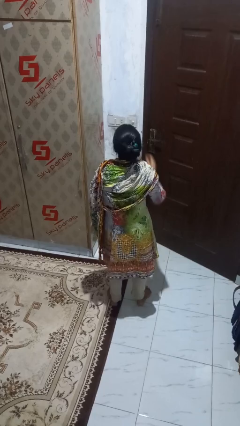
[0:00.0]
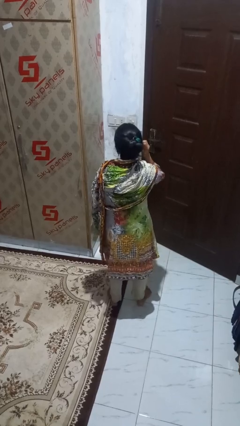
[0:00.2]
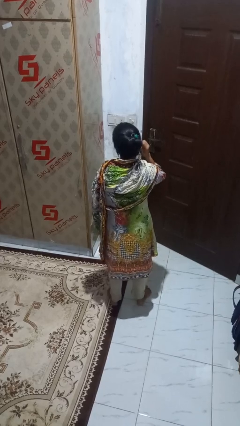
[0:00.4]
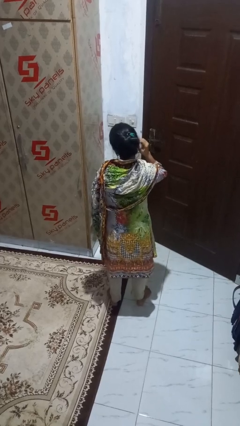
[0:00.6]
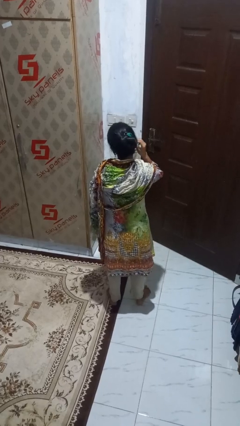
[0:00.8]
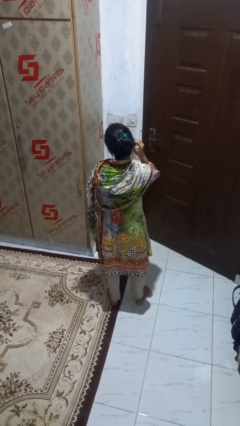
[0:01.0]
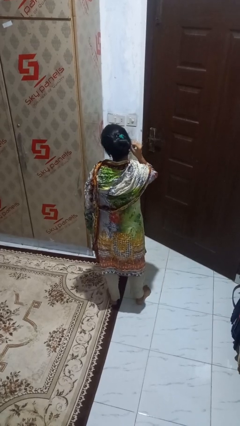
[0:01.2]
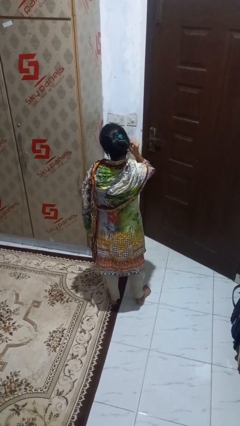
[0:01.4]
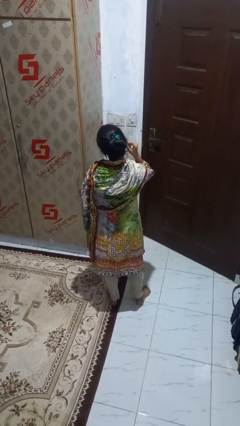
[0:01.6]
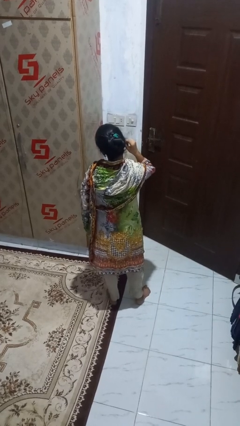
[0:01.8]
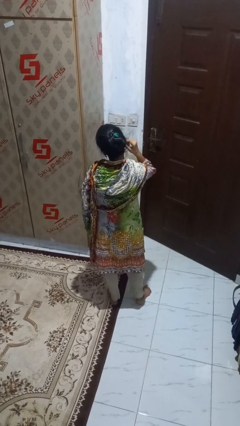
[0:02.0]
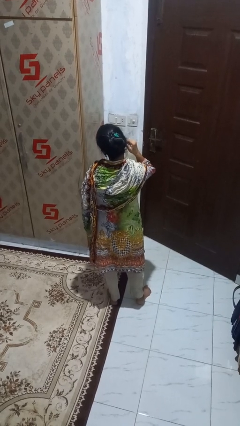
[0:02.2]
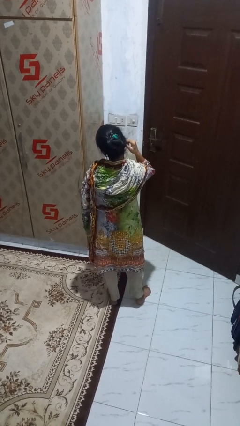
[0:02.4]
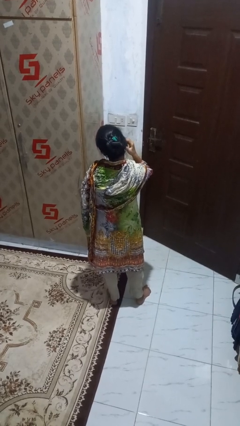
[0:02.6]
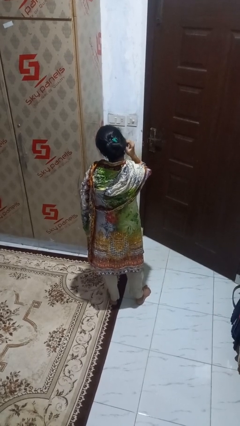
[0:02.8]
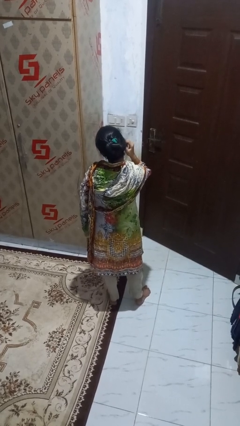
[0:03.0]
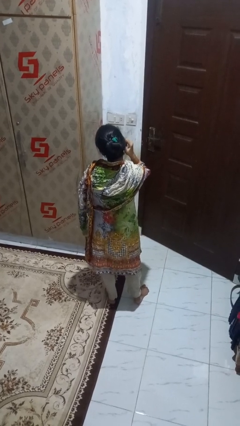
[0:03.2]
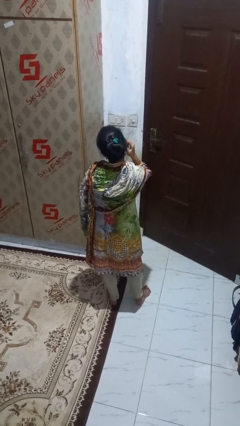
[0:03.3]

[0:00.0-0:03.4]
person touches earlobe

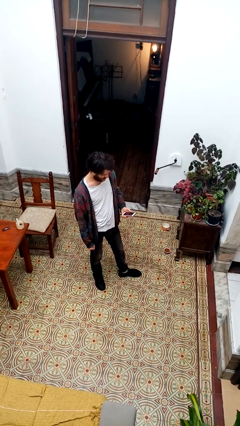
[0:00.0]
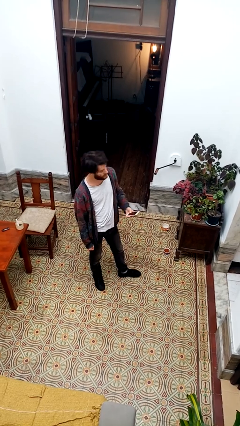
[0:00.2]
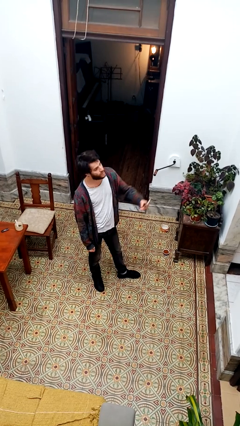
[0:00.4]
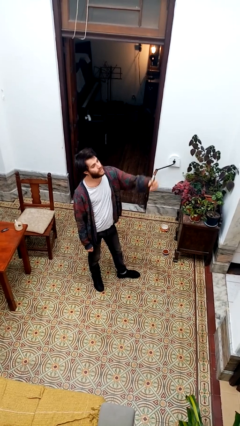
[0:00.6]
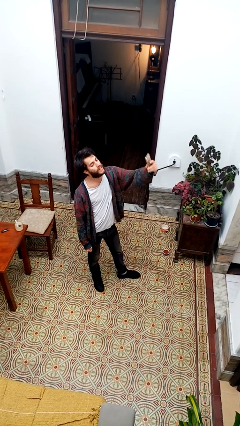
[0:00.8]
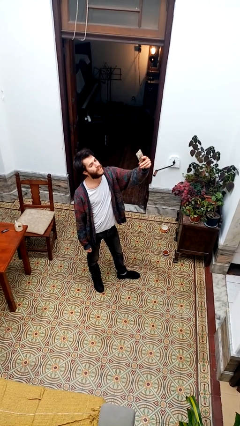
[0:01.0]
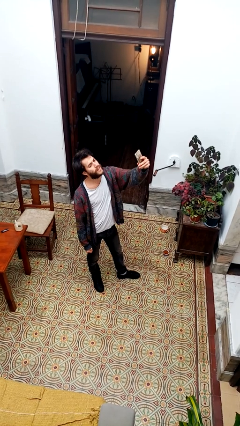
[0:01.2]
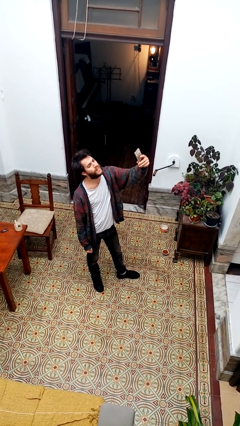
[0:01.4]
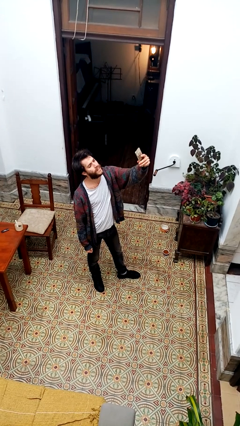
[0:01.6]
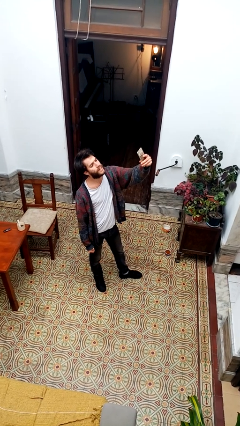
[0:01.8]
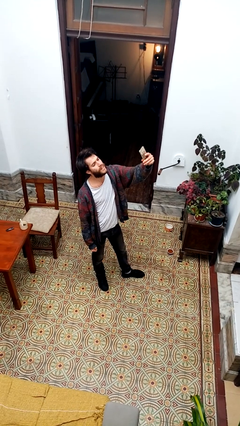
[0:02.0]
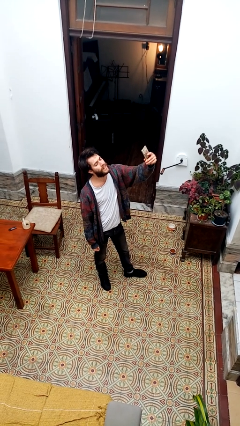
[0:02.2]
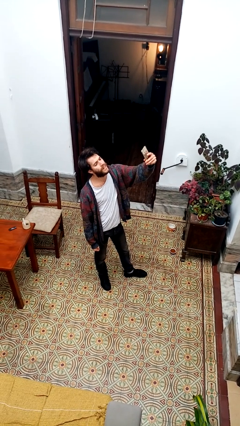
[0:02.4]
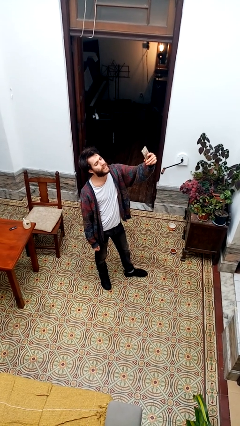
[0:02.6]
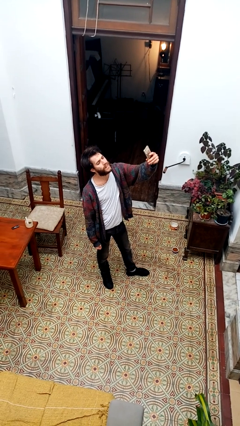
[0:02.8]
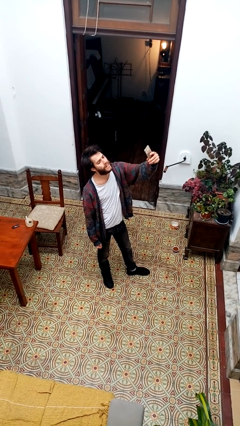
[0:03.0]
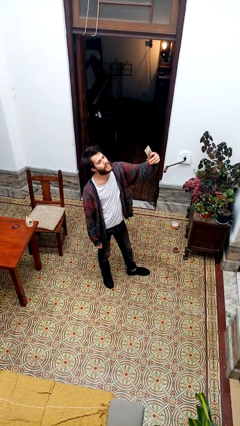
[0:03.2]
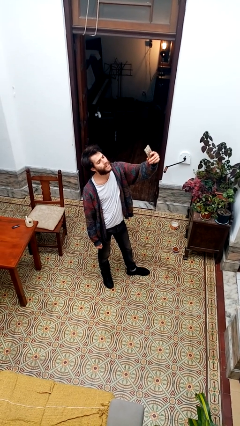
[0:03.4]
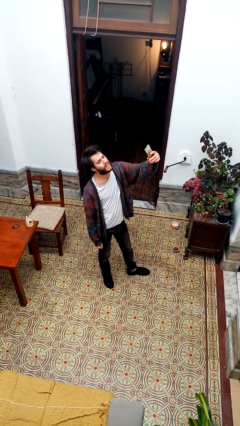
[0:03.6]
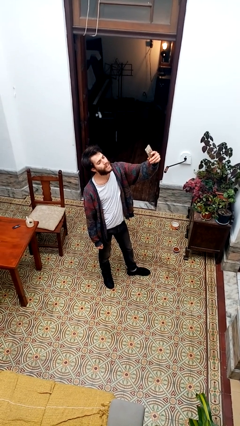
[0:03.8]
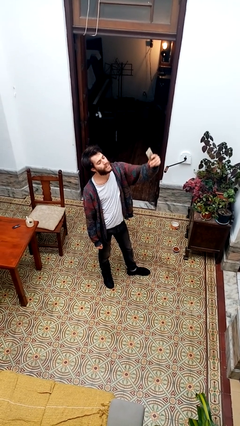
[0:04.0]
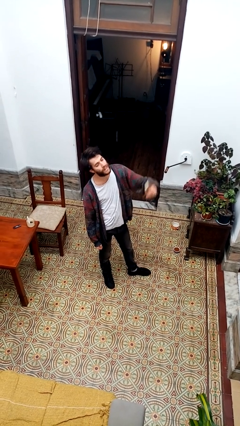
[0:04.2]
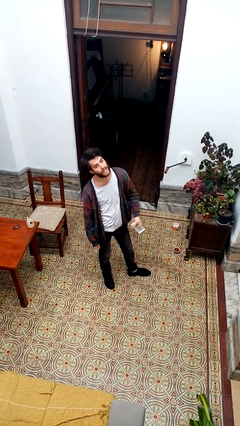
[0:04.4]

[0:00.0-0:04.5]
person takes selfie

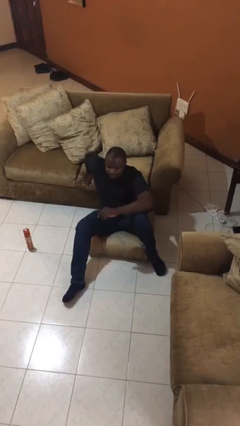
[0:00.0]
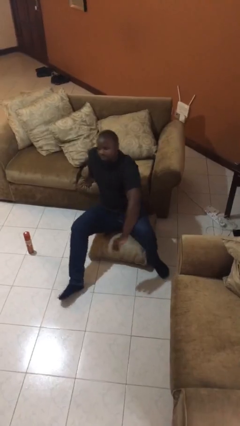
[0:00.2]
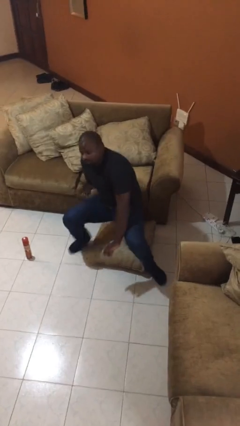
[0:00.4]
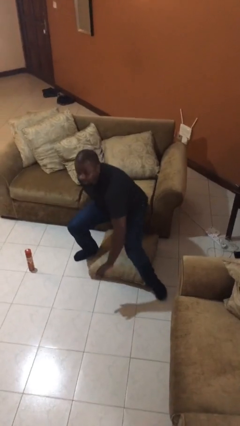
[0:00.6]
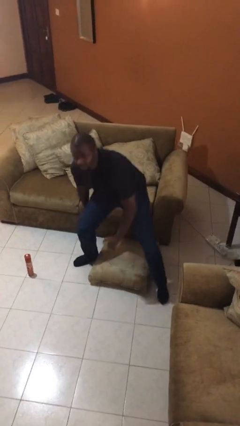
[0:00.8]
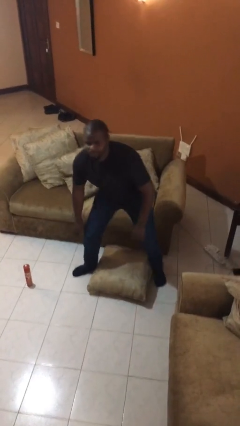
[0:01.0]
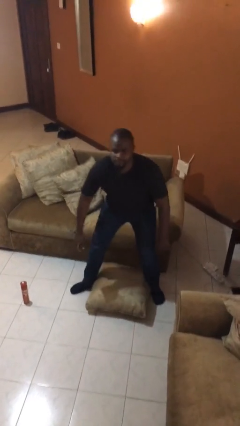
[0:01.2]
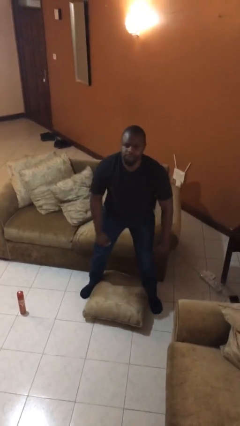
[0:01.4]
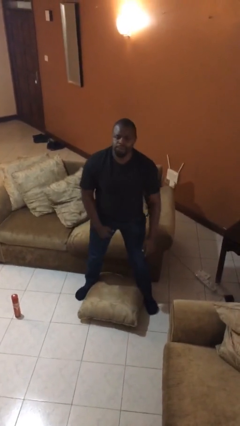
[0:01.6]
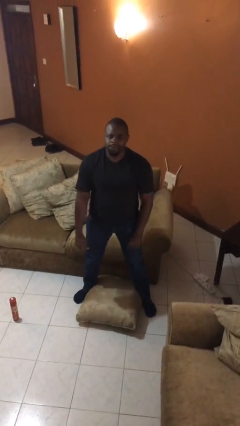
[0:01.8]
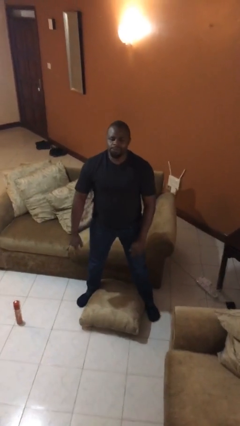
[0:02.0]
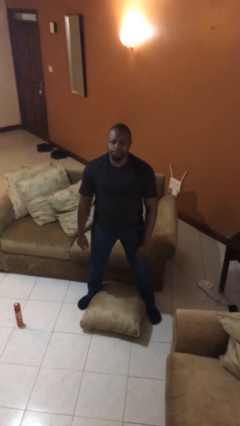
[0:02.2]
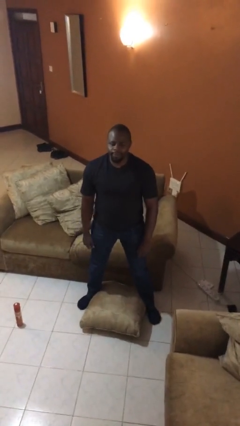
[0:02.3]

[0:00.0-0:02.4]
person stands up from floor

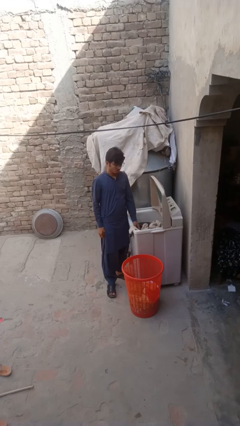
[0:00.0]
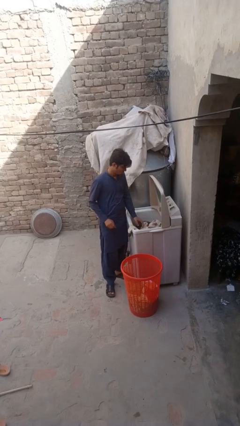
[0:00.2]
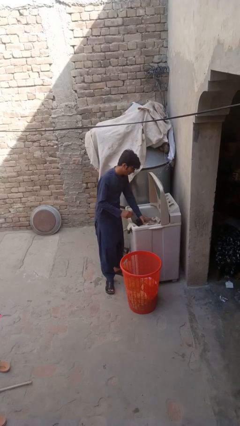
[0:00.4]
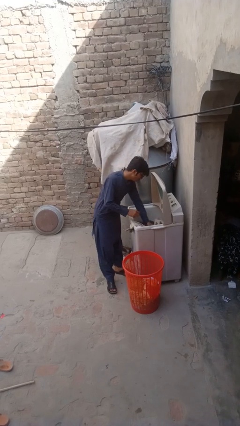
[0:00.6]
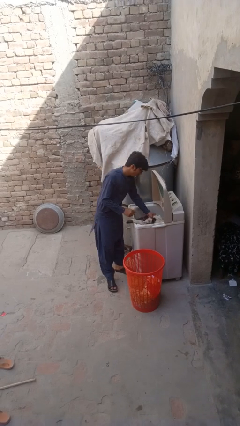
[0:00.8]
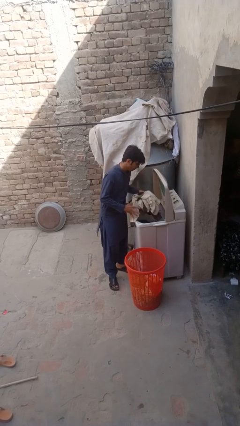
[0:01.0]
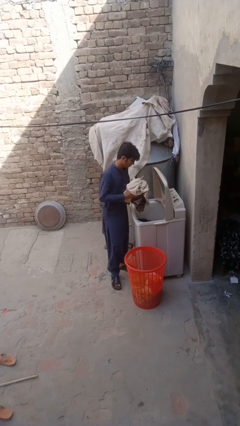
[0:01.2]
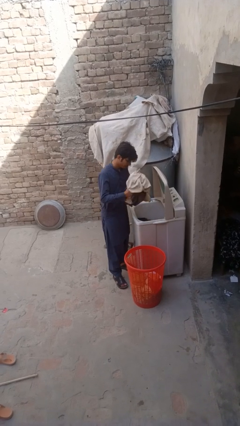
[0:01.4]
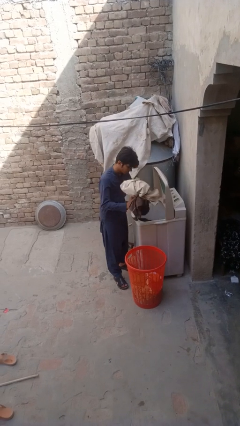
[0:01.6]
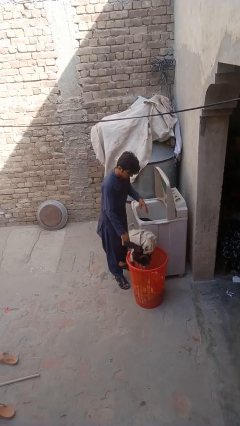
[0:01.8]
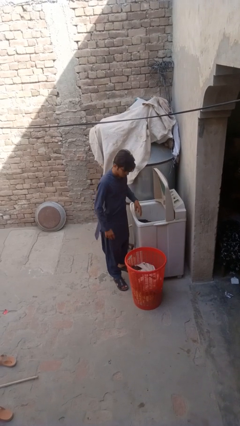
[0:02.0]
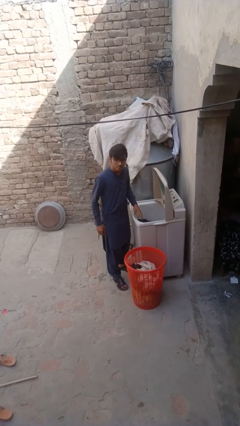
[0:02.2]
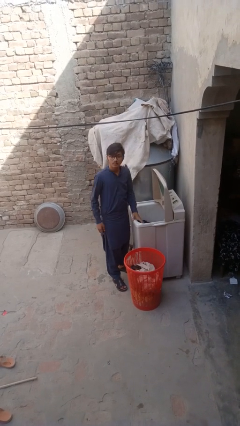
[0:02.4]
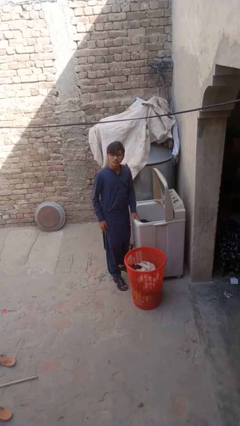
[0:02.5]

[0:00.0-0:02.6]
person unloads clotheswasher

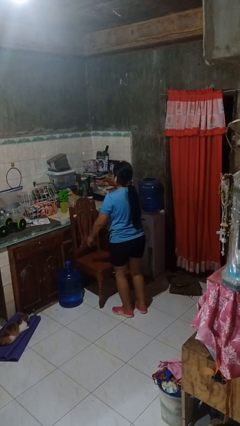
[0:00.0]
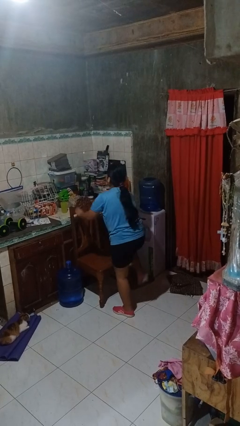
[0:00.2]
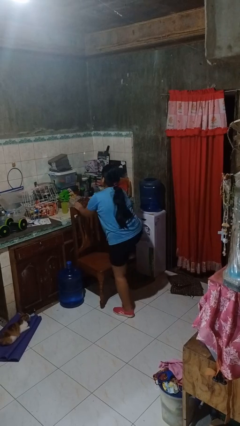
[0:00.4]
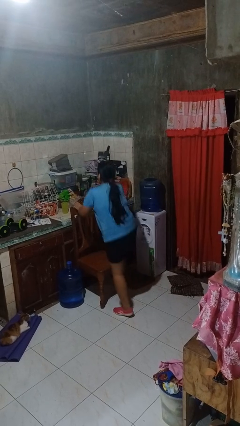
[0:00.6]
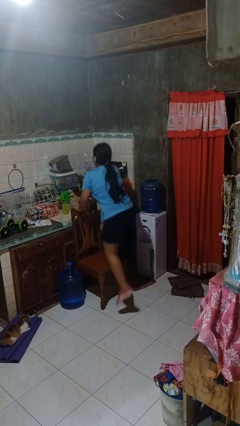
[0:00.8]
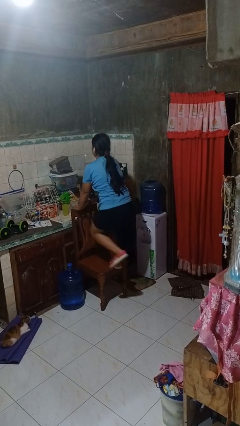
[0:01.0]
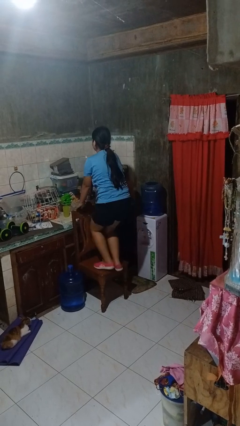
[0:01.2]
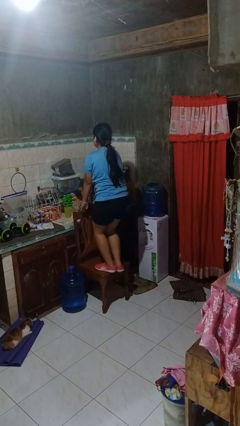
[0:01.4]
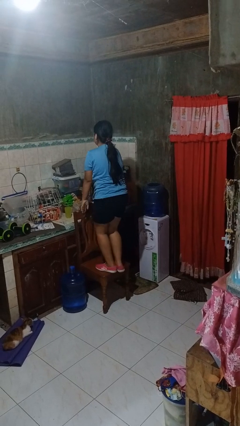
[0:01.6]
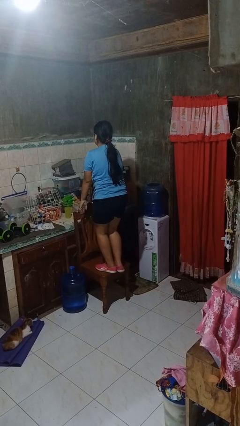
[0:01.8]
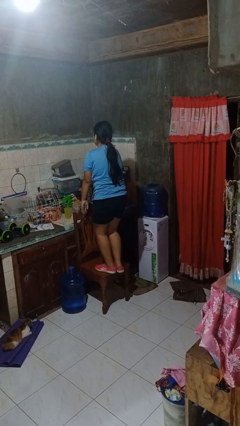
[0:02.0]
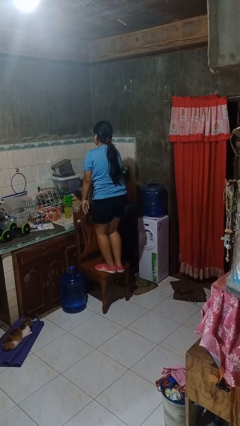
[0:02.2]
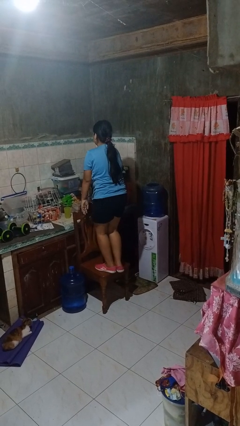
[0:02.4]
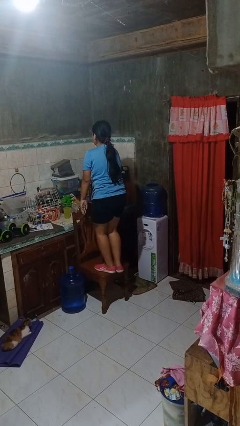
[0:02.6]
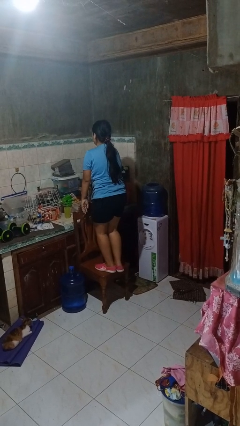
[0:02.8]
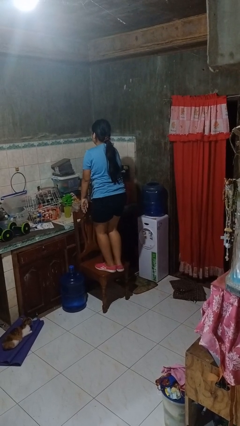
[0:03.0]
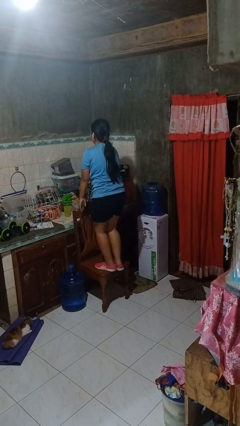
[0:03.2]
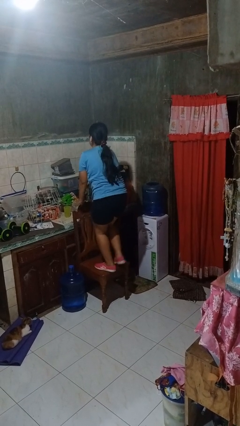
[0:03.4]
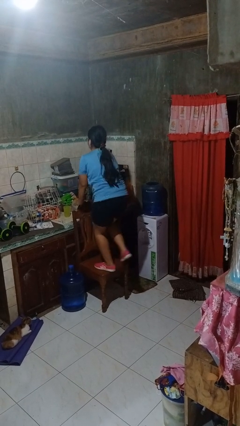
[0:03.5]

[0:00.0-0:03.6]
person climbs on chair

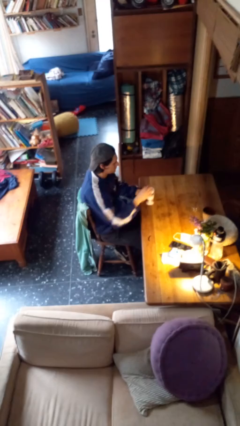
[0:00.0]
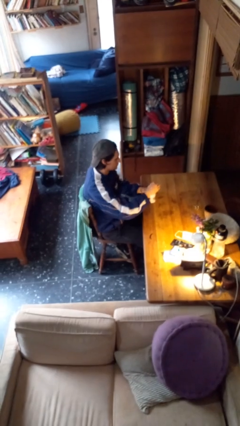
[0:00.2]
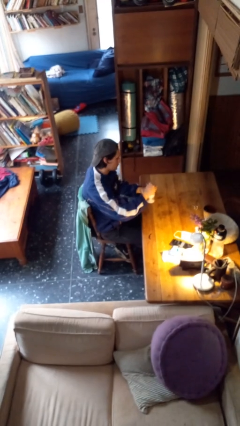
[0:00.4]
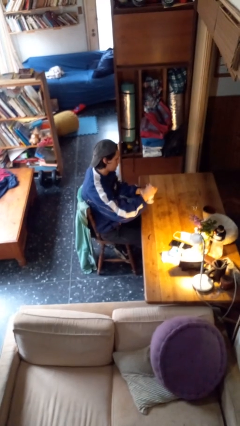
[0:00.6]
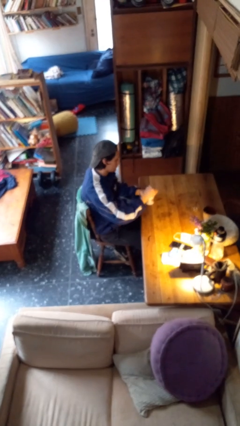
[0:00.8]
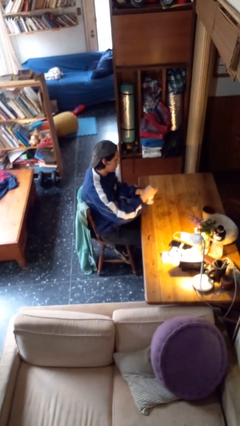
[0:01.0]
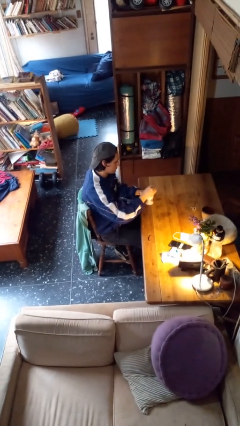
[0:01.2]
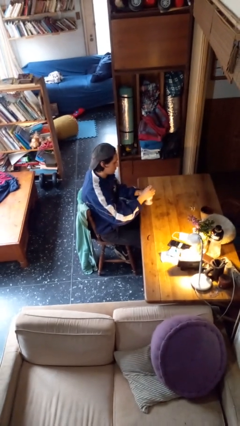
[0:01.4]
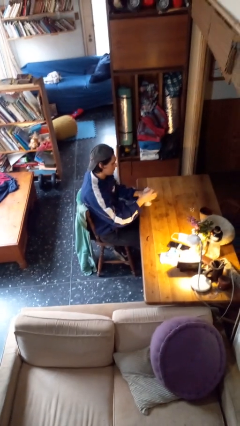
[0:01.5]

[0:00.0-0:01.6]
person stirs mug
